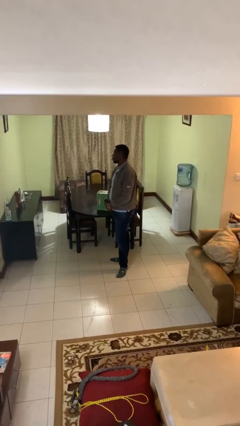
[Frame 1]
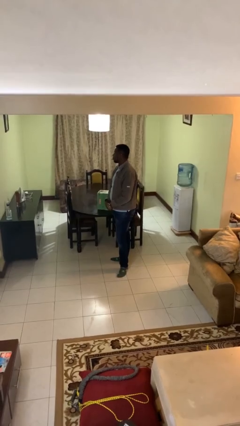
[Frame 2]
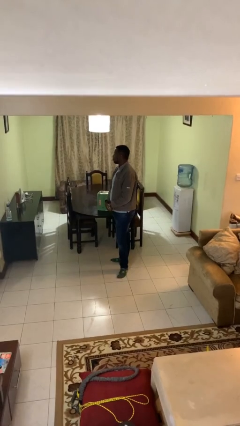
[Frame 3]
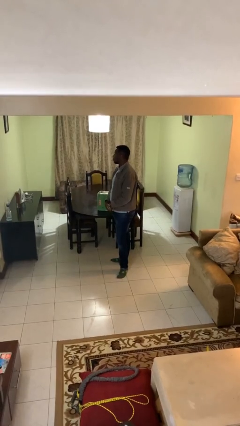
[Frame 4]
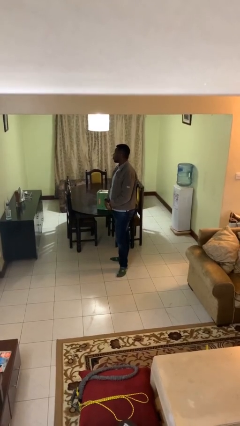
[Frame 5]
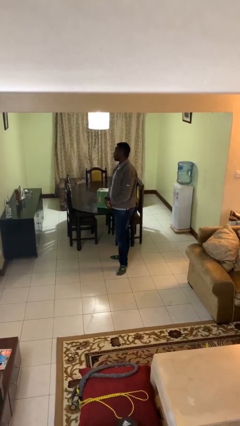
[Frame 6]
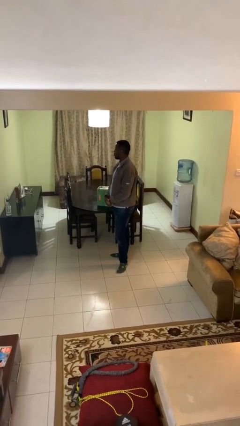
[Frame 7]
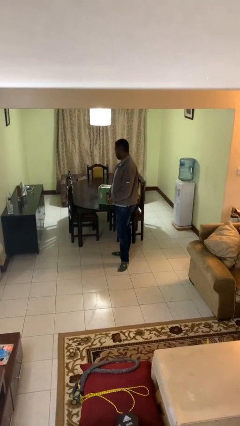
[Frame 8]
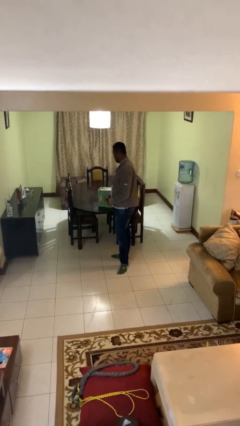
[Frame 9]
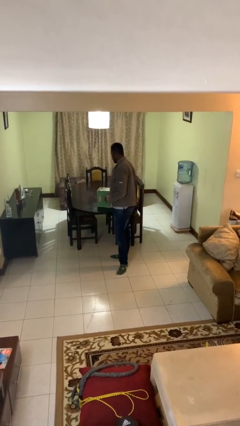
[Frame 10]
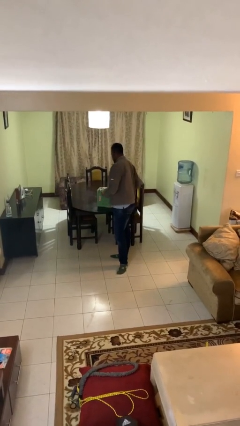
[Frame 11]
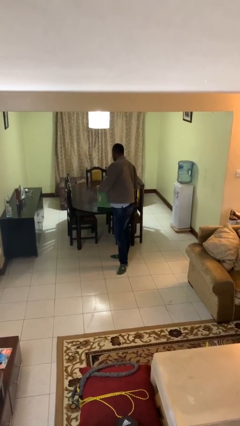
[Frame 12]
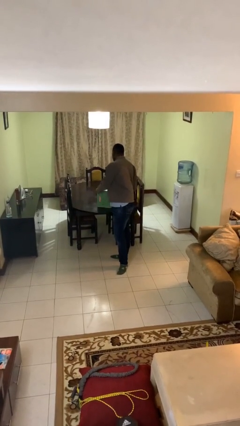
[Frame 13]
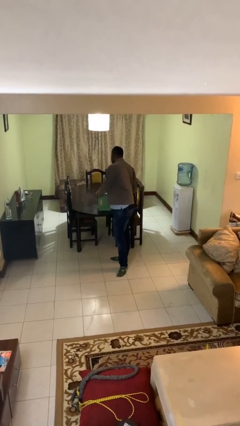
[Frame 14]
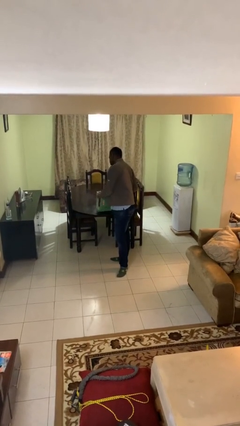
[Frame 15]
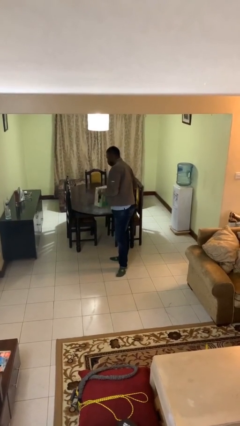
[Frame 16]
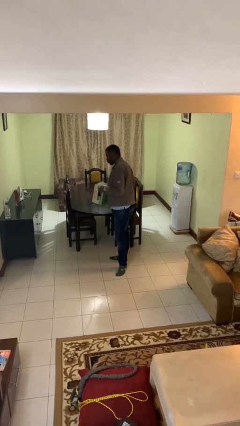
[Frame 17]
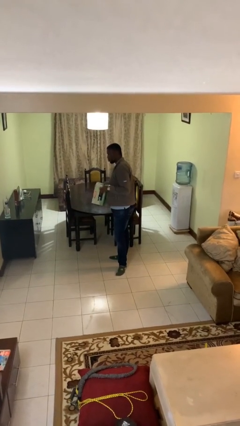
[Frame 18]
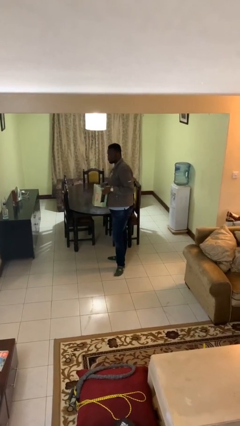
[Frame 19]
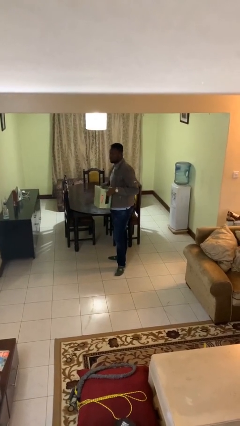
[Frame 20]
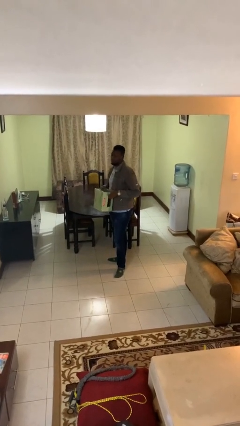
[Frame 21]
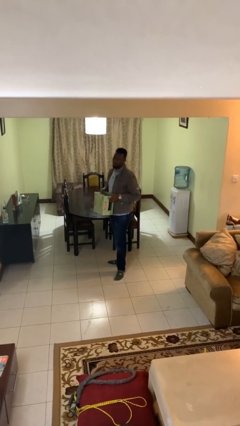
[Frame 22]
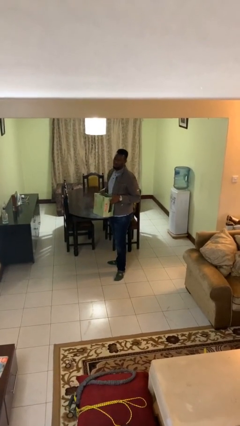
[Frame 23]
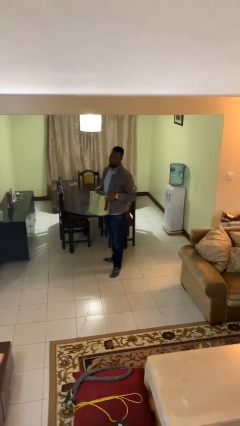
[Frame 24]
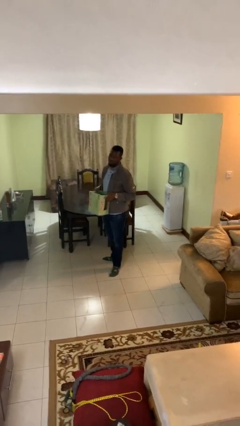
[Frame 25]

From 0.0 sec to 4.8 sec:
person picks up object from table

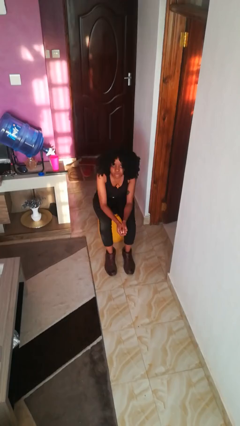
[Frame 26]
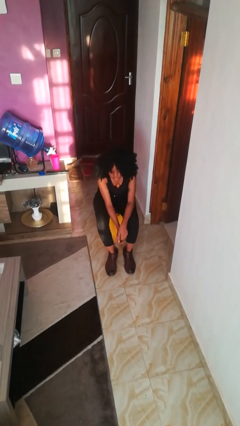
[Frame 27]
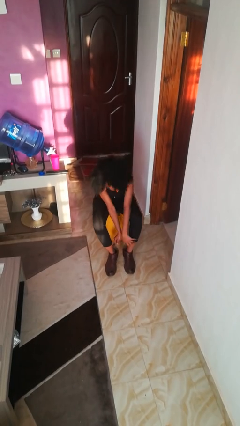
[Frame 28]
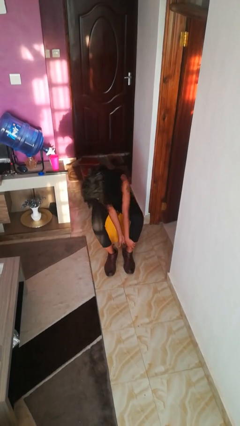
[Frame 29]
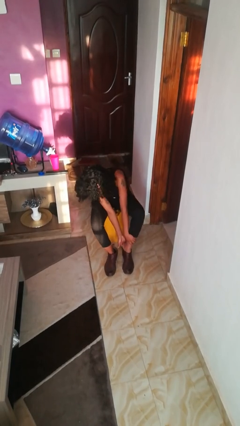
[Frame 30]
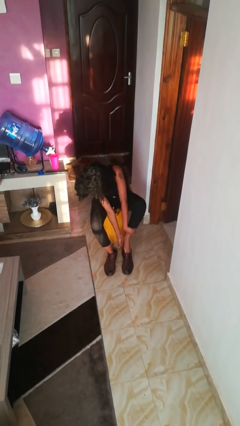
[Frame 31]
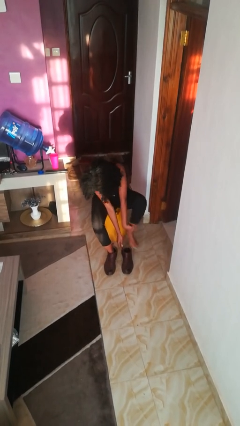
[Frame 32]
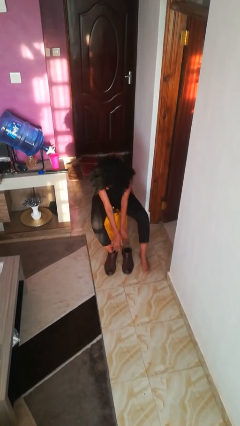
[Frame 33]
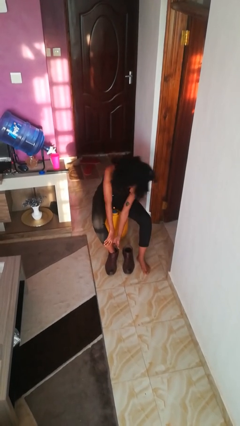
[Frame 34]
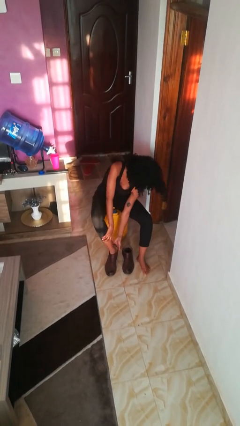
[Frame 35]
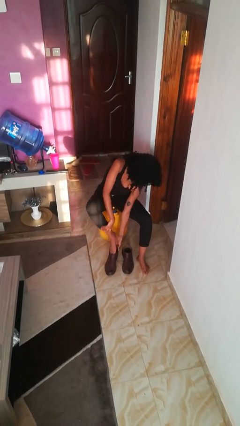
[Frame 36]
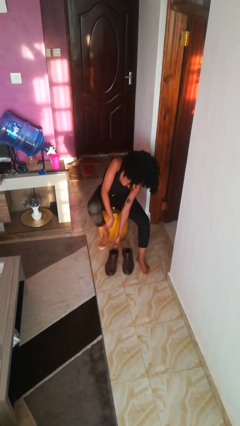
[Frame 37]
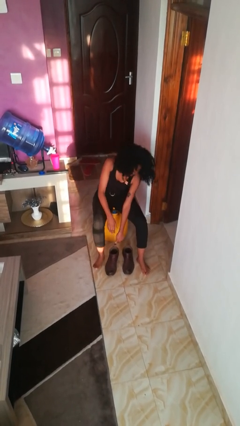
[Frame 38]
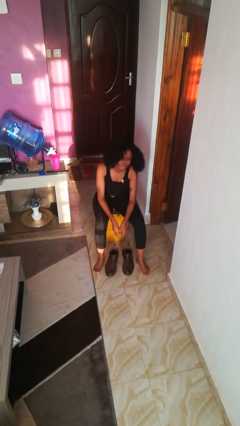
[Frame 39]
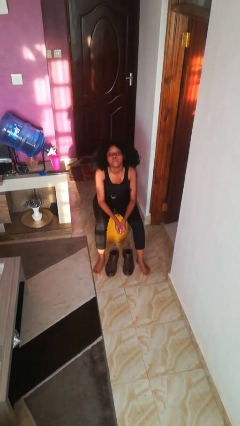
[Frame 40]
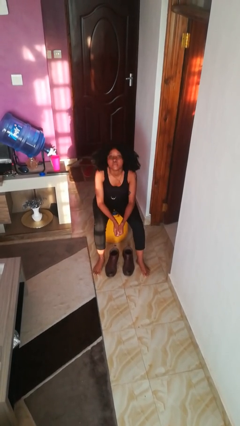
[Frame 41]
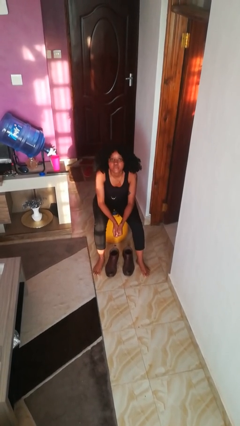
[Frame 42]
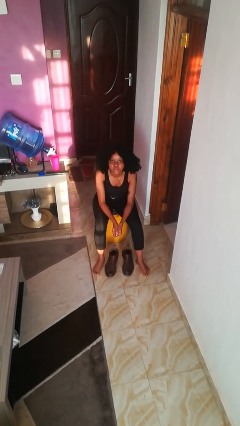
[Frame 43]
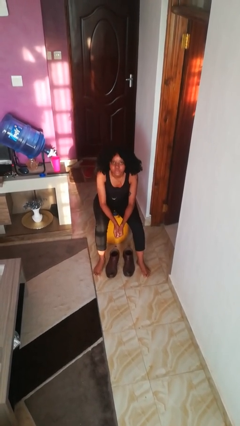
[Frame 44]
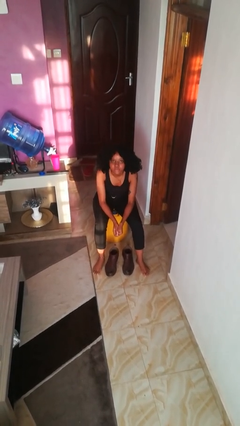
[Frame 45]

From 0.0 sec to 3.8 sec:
person takes off boots

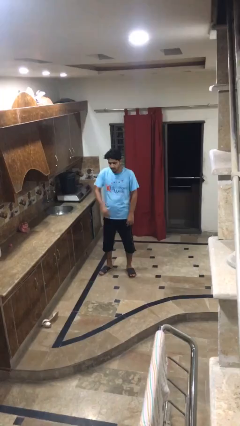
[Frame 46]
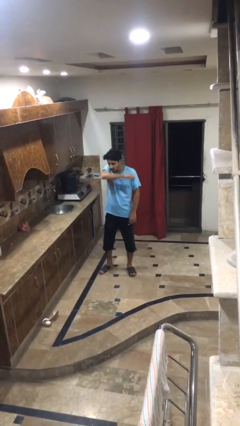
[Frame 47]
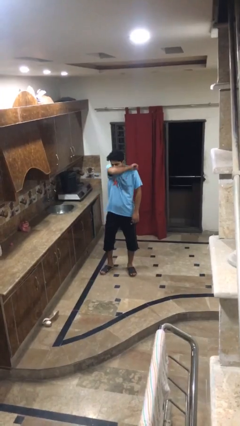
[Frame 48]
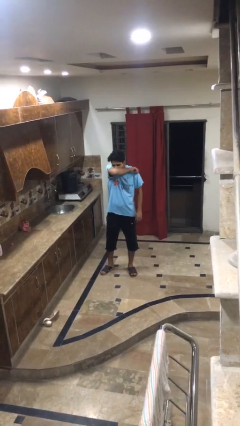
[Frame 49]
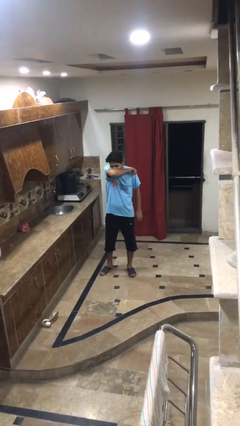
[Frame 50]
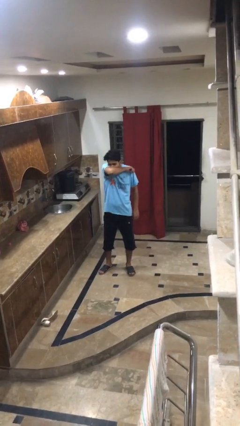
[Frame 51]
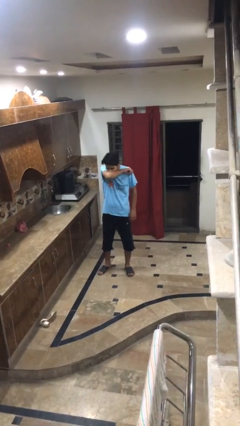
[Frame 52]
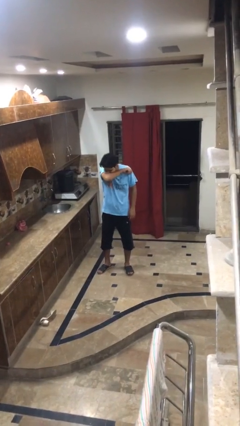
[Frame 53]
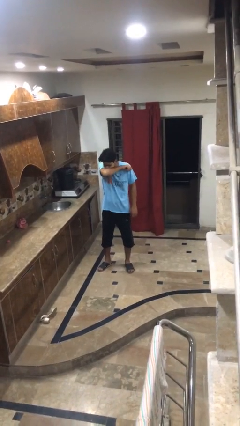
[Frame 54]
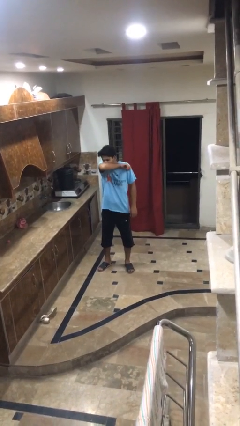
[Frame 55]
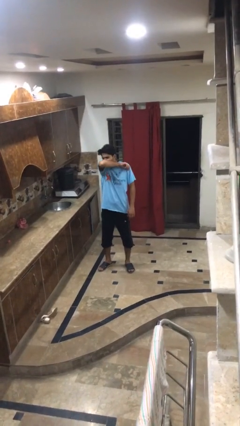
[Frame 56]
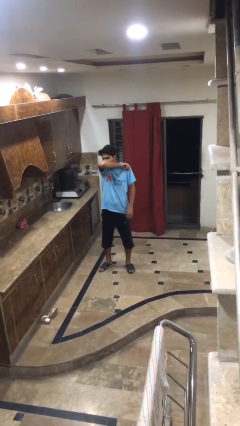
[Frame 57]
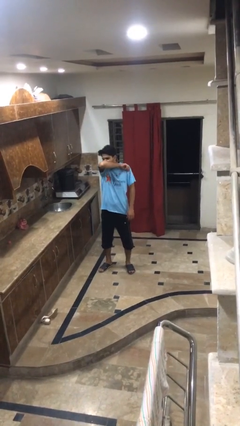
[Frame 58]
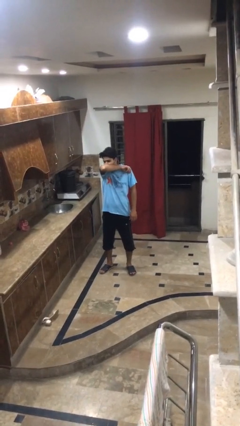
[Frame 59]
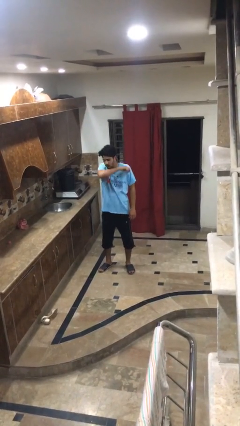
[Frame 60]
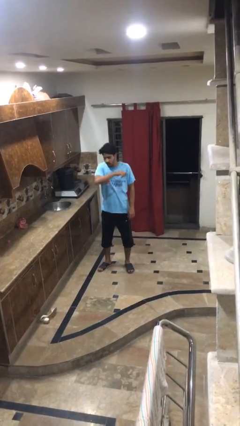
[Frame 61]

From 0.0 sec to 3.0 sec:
person sneezes into arm

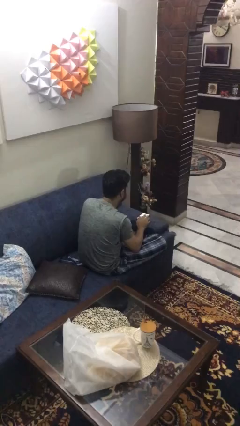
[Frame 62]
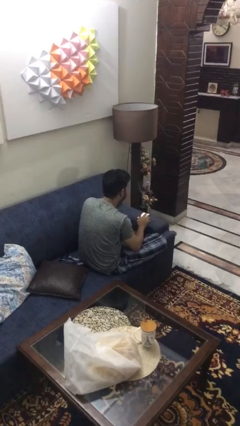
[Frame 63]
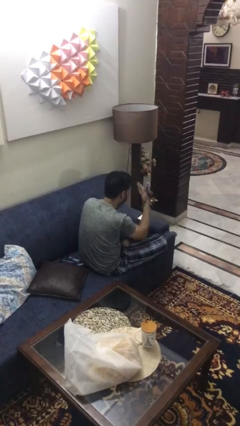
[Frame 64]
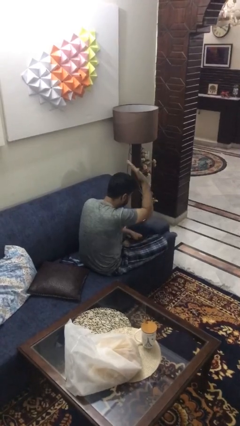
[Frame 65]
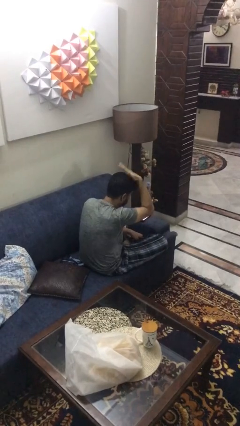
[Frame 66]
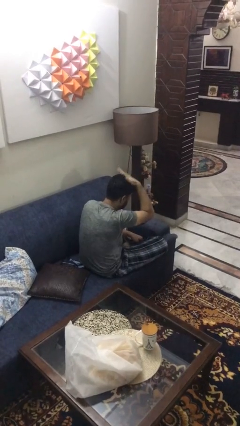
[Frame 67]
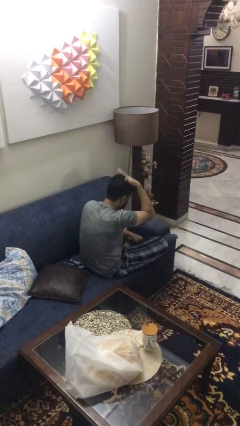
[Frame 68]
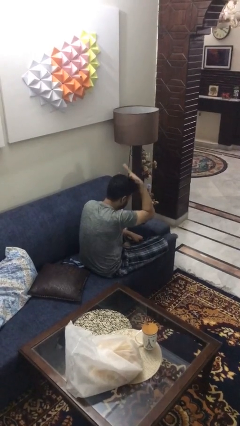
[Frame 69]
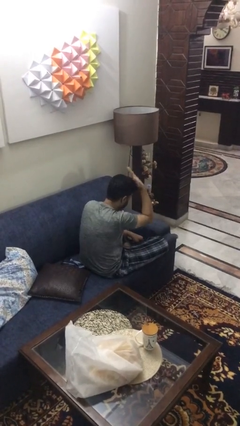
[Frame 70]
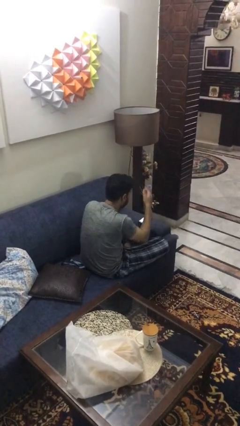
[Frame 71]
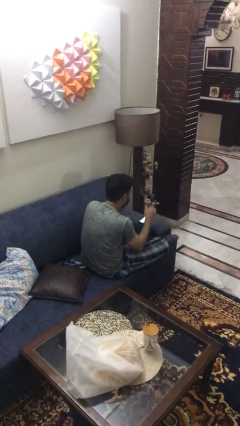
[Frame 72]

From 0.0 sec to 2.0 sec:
person pats head

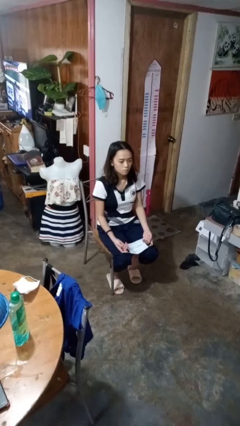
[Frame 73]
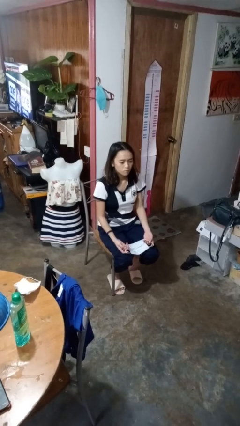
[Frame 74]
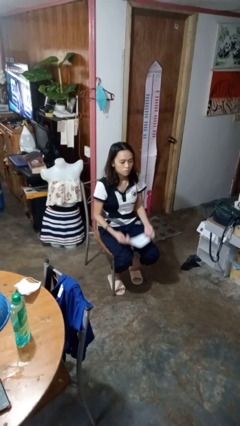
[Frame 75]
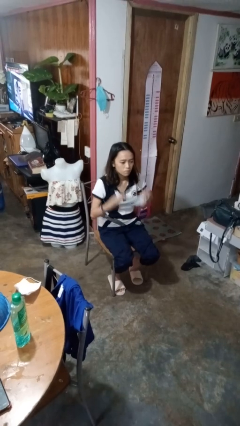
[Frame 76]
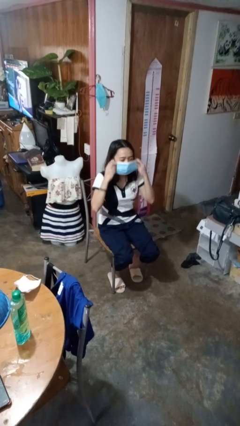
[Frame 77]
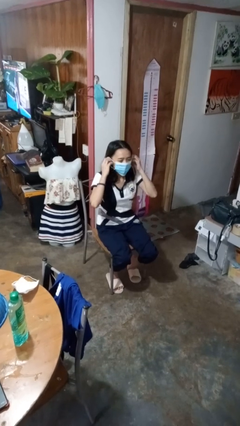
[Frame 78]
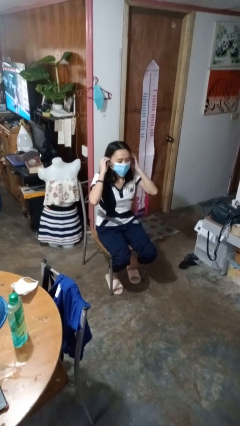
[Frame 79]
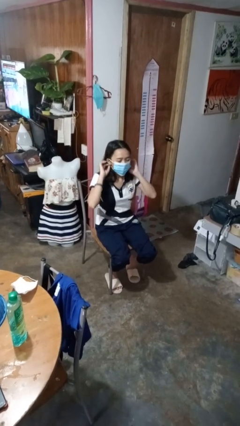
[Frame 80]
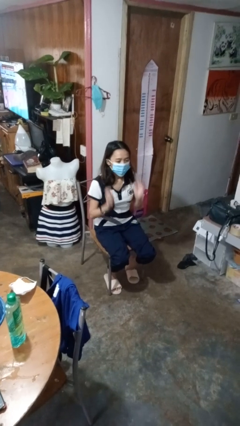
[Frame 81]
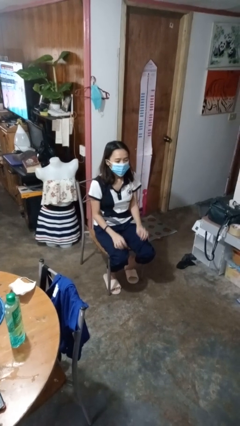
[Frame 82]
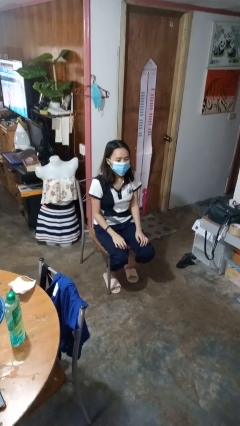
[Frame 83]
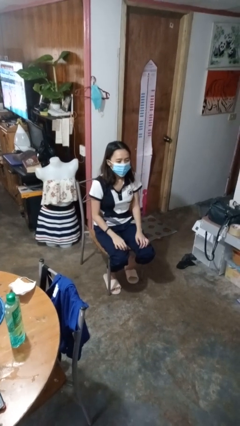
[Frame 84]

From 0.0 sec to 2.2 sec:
person puts on facemask

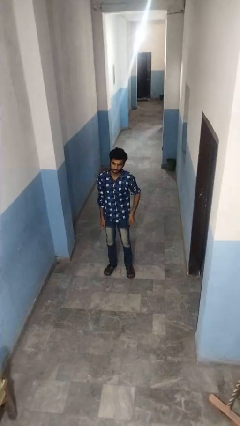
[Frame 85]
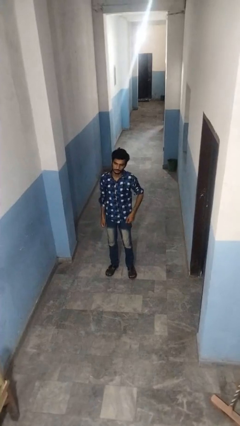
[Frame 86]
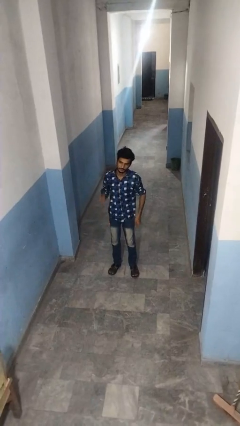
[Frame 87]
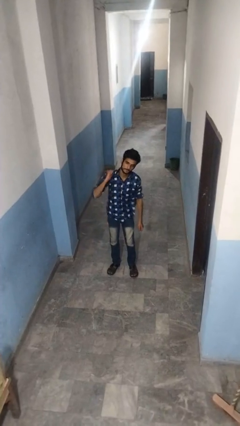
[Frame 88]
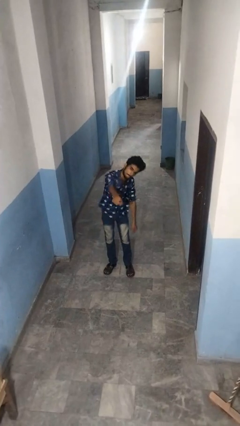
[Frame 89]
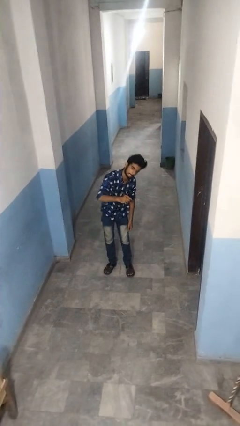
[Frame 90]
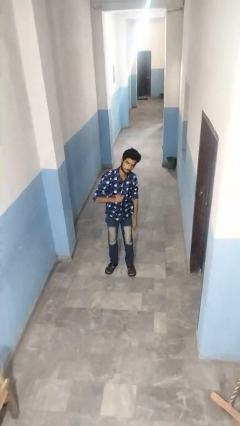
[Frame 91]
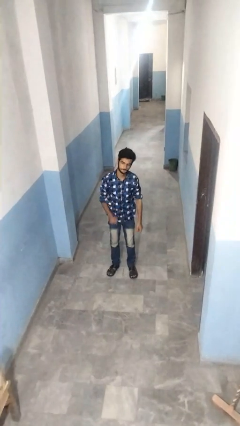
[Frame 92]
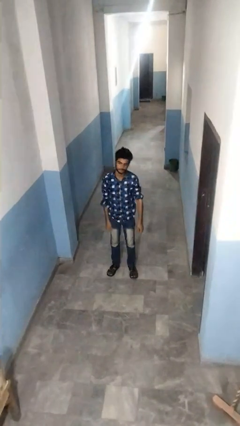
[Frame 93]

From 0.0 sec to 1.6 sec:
person punches
